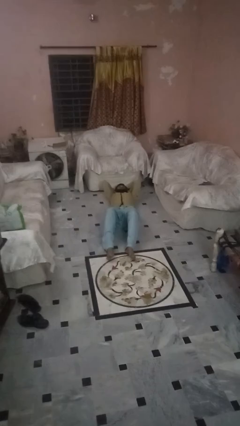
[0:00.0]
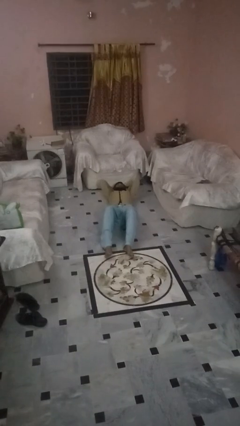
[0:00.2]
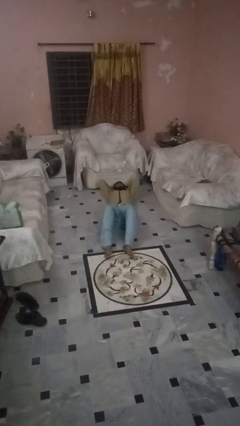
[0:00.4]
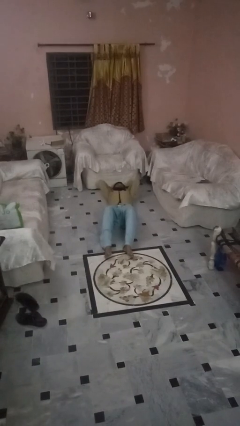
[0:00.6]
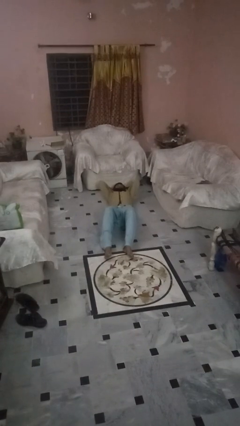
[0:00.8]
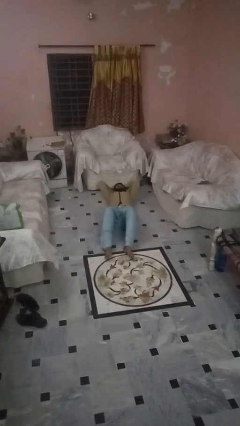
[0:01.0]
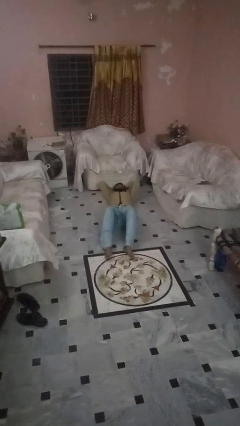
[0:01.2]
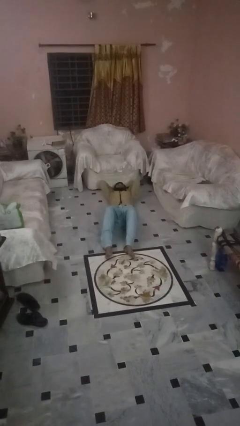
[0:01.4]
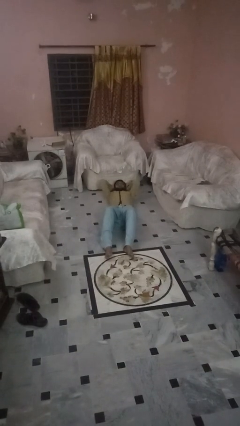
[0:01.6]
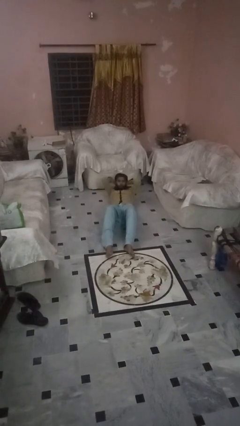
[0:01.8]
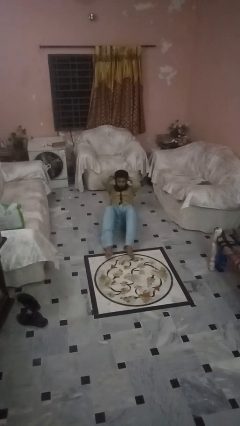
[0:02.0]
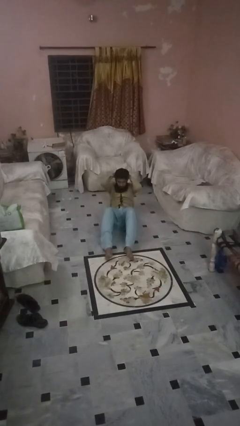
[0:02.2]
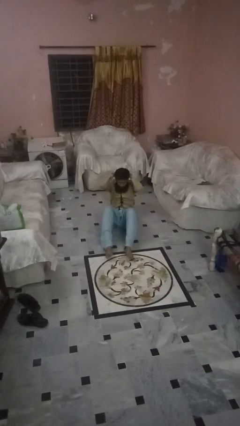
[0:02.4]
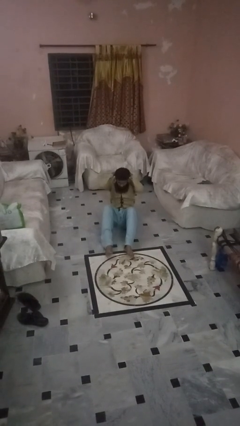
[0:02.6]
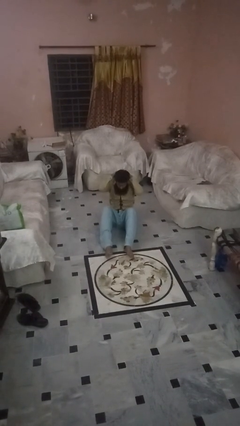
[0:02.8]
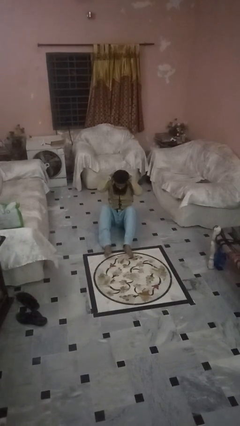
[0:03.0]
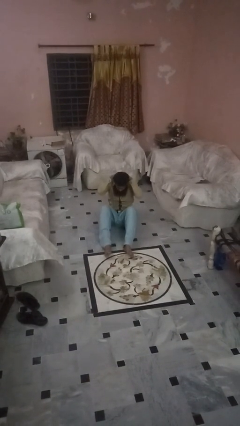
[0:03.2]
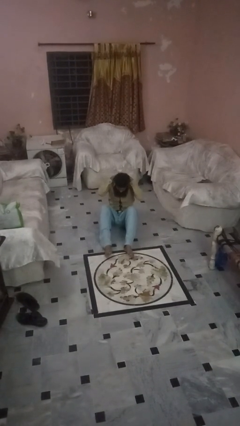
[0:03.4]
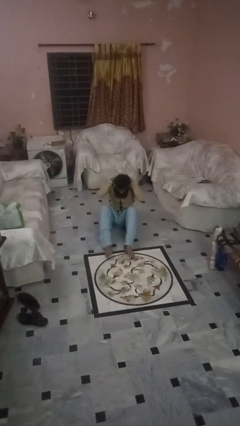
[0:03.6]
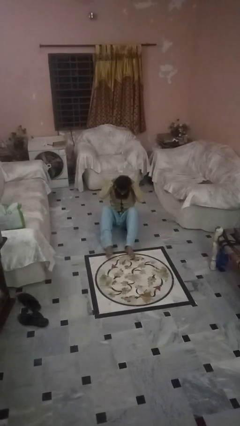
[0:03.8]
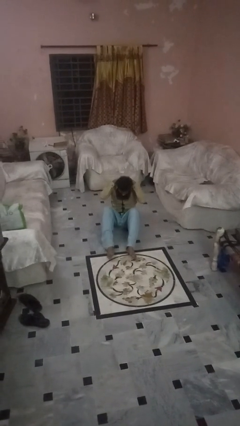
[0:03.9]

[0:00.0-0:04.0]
person exercises with situp

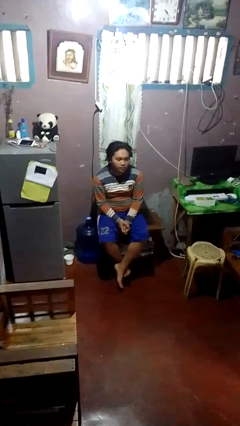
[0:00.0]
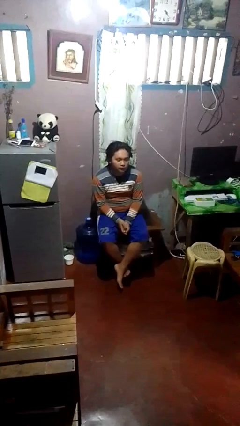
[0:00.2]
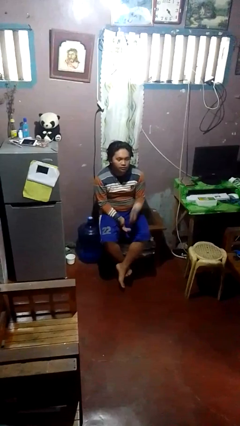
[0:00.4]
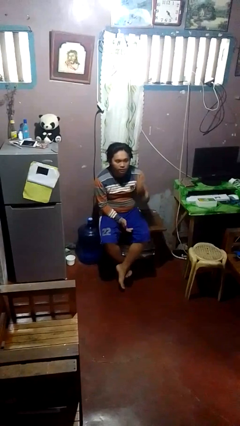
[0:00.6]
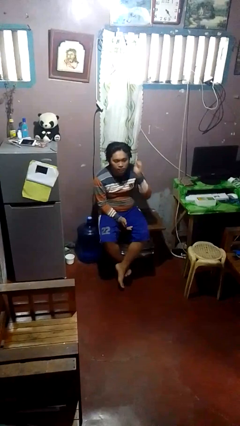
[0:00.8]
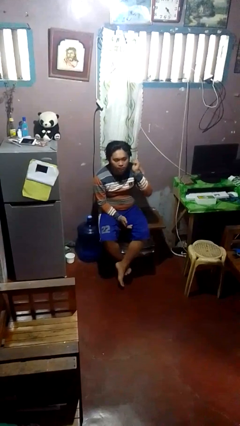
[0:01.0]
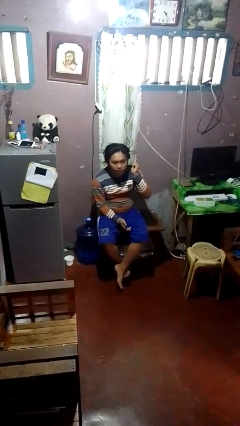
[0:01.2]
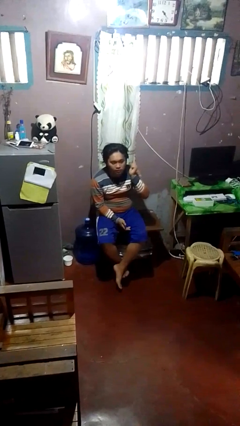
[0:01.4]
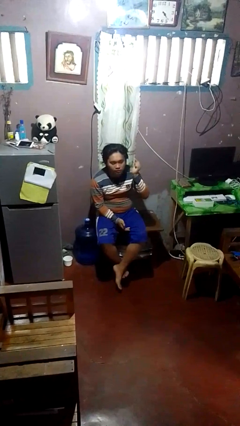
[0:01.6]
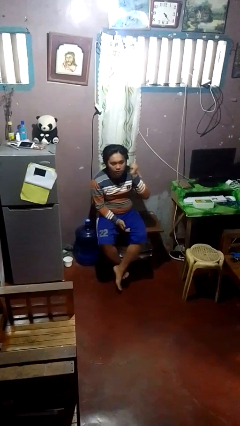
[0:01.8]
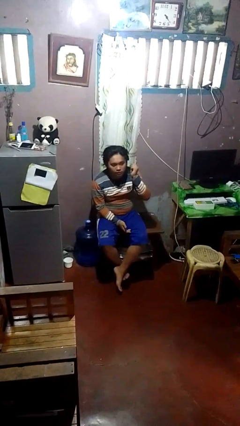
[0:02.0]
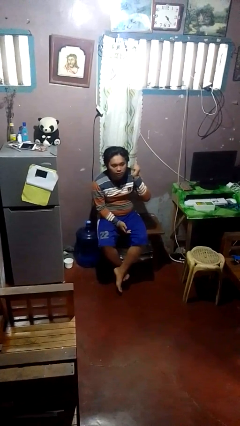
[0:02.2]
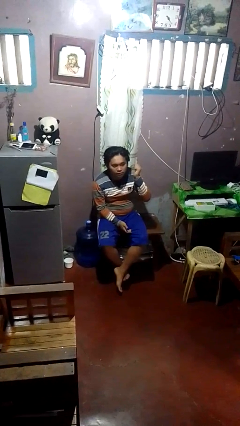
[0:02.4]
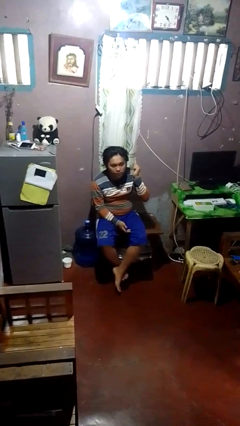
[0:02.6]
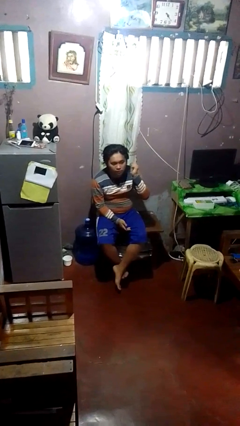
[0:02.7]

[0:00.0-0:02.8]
person gestures listen closely

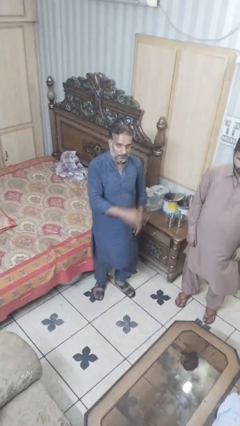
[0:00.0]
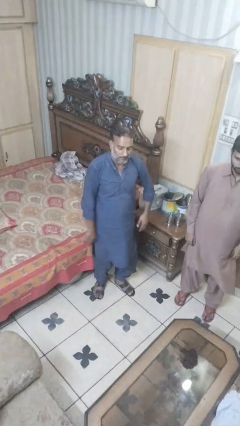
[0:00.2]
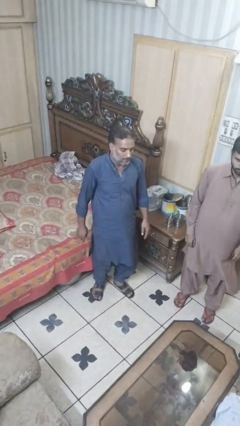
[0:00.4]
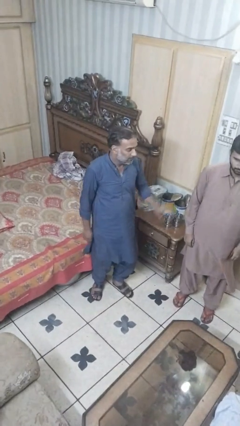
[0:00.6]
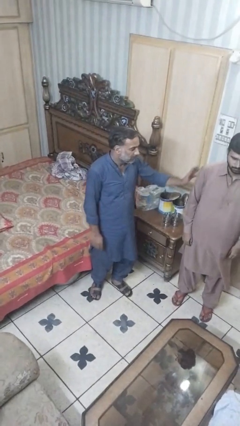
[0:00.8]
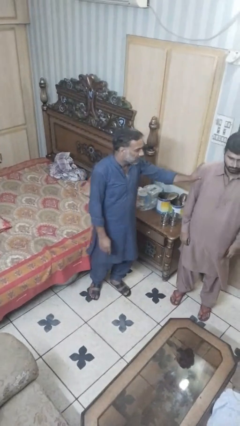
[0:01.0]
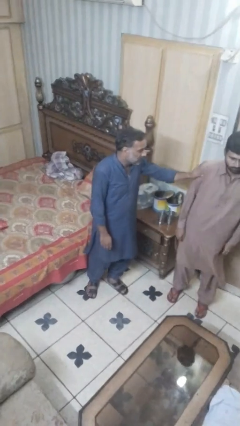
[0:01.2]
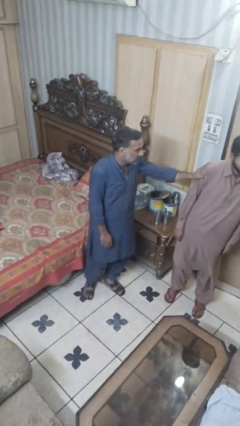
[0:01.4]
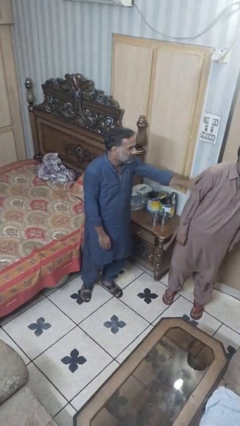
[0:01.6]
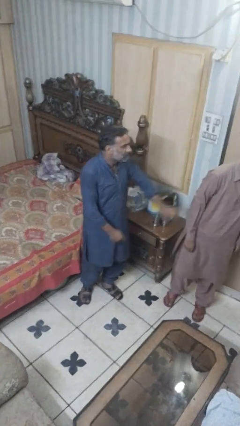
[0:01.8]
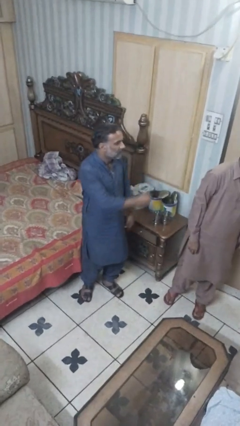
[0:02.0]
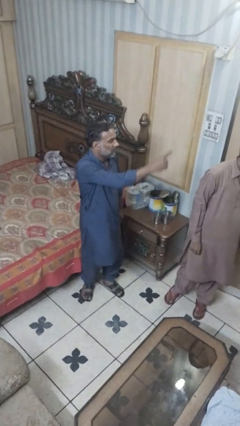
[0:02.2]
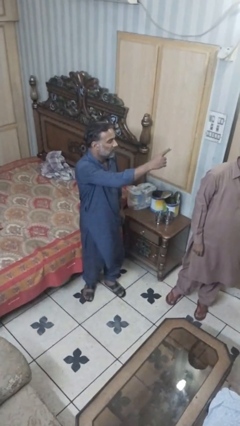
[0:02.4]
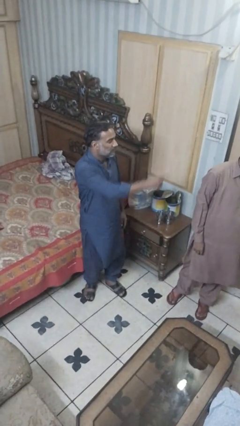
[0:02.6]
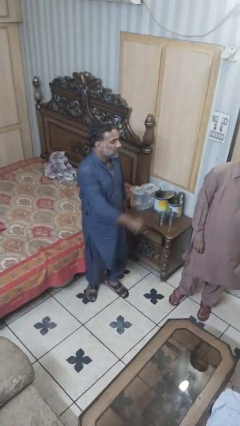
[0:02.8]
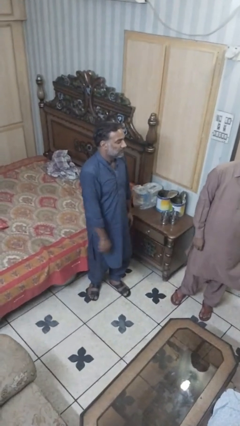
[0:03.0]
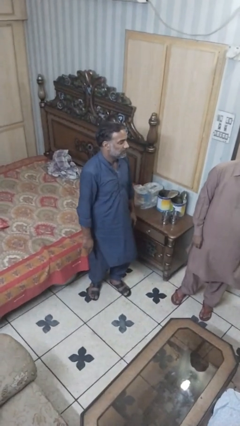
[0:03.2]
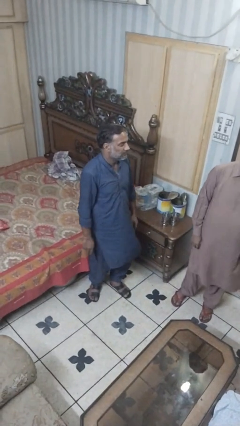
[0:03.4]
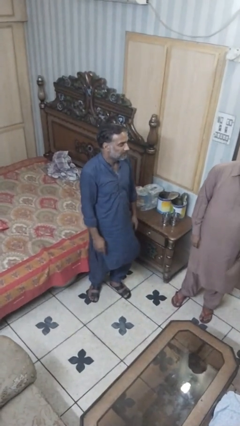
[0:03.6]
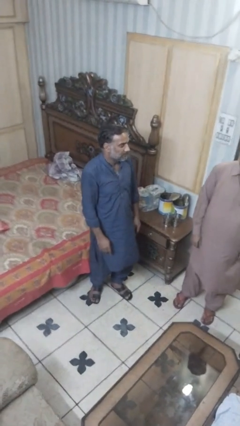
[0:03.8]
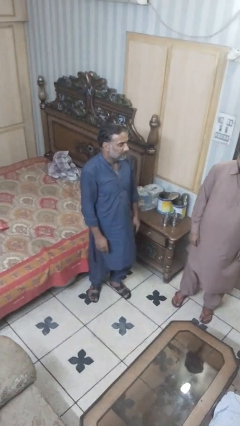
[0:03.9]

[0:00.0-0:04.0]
person shoves person

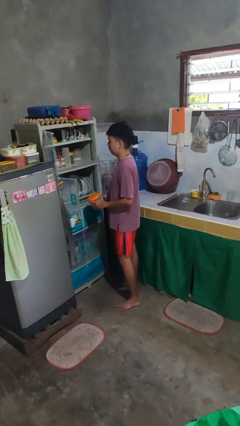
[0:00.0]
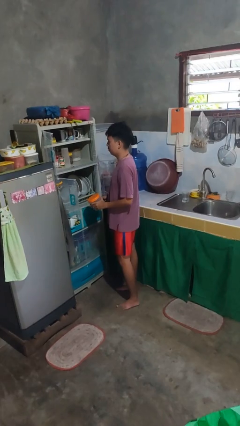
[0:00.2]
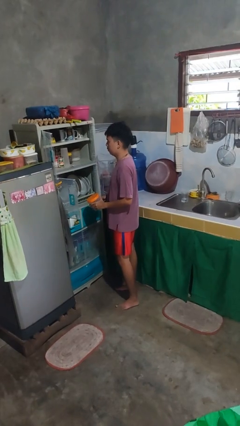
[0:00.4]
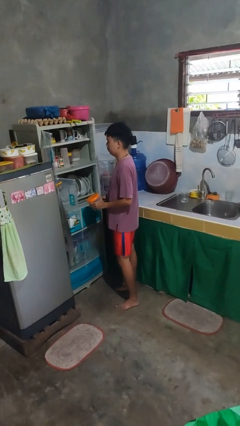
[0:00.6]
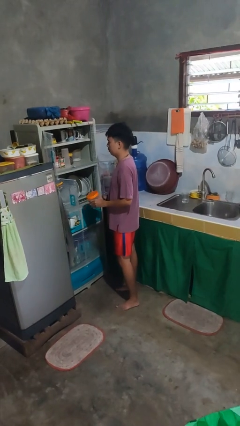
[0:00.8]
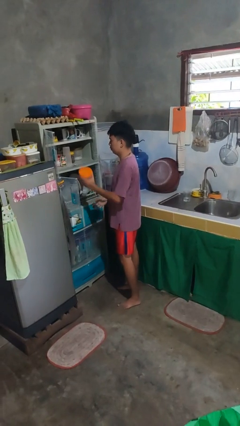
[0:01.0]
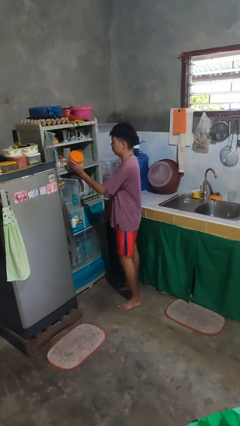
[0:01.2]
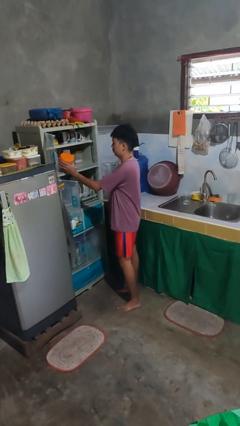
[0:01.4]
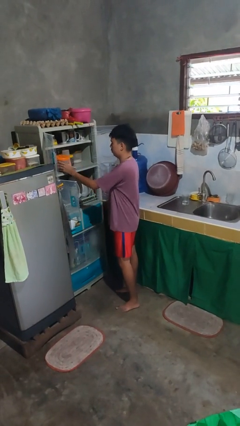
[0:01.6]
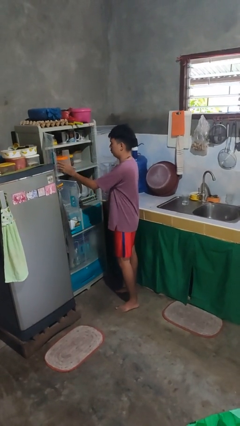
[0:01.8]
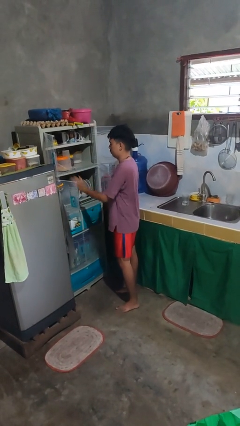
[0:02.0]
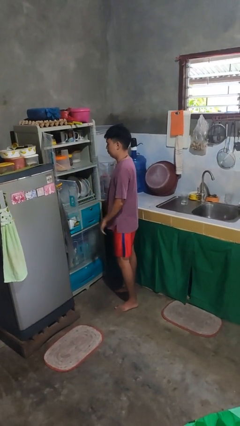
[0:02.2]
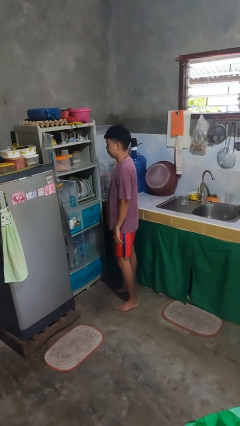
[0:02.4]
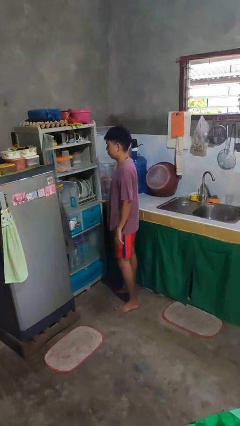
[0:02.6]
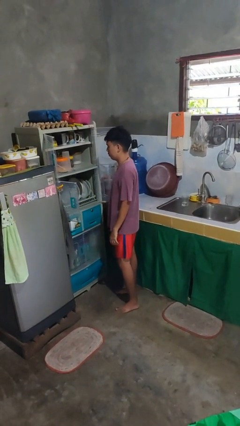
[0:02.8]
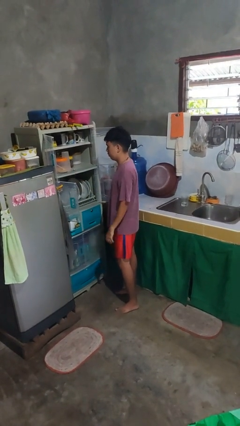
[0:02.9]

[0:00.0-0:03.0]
person puts object in cabinet

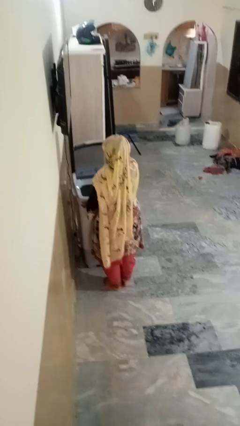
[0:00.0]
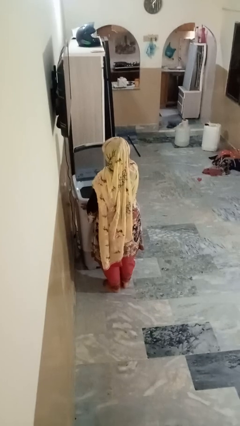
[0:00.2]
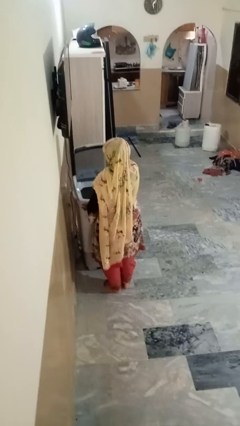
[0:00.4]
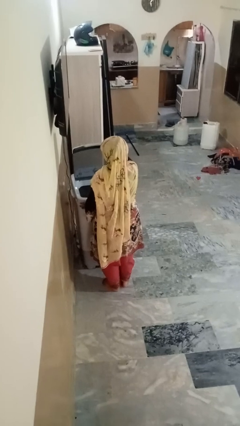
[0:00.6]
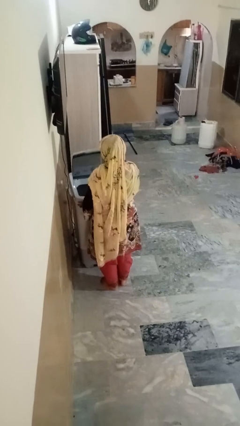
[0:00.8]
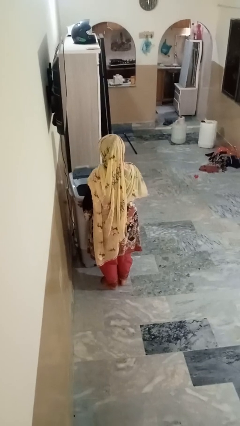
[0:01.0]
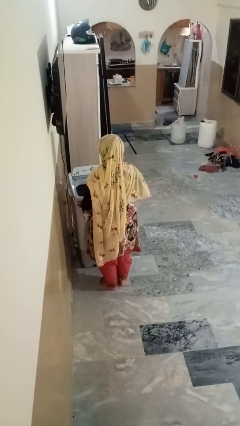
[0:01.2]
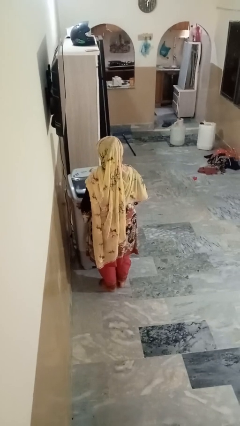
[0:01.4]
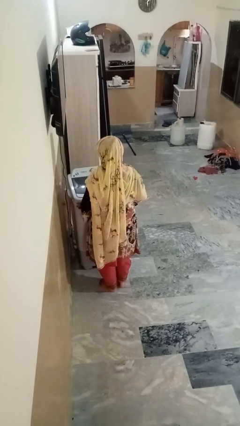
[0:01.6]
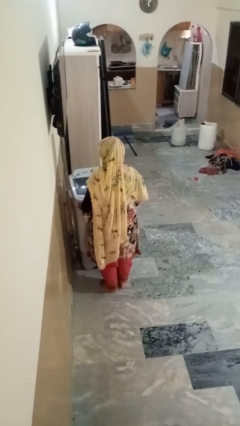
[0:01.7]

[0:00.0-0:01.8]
person closes clothes washer

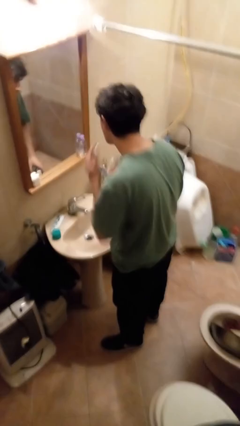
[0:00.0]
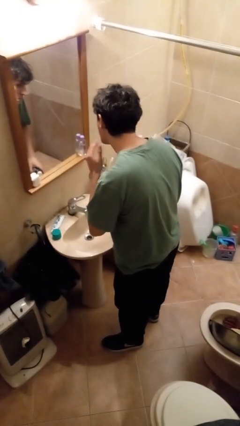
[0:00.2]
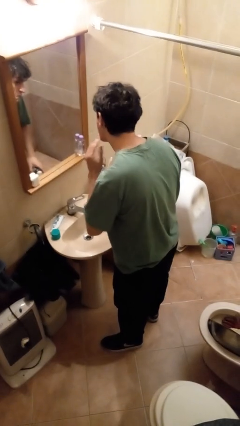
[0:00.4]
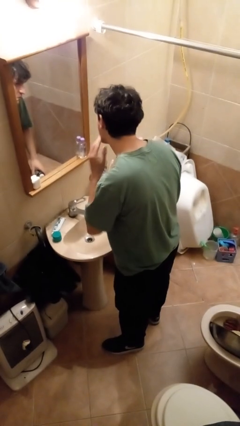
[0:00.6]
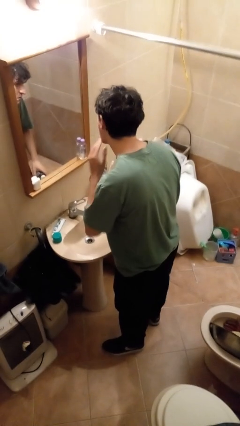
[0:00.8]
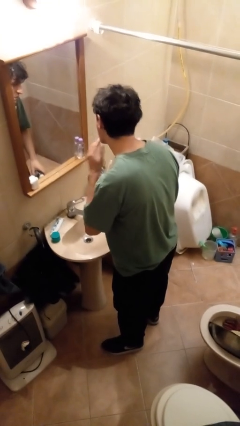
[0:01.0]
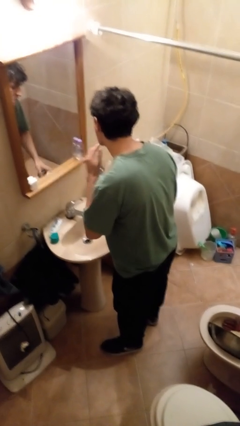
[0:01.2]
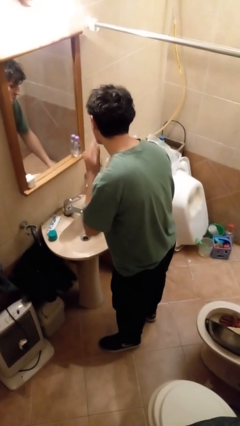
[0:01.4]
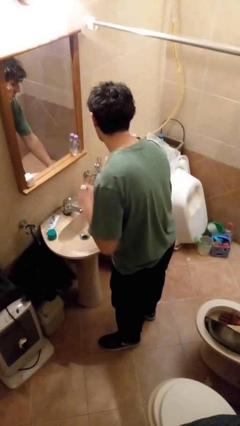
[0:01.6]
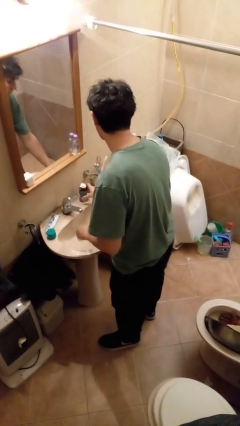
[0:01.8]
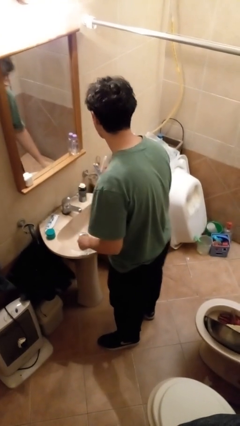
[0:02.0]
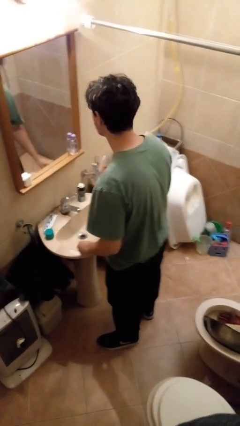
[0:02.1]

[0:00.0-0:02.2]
person applies shaving cream
